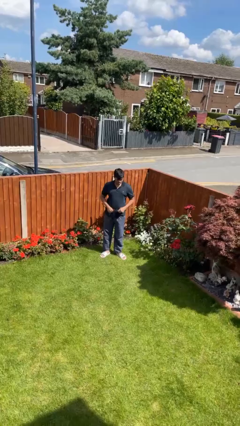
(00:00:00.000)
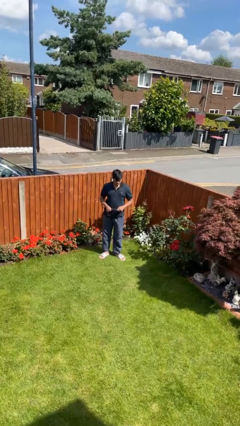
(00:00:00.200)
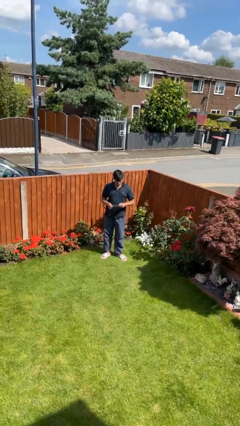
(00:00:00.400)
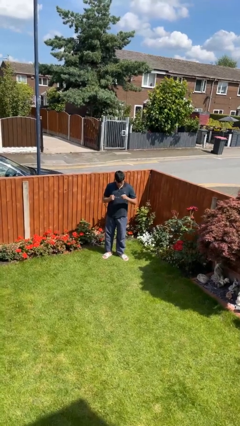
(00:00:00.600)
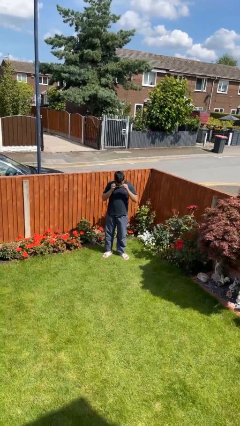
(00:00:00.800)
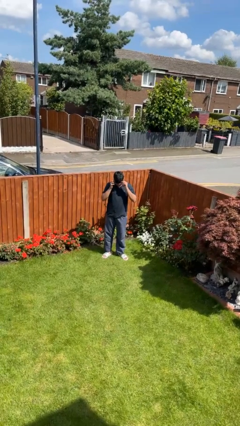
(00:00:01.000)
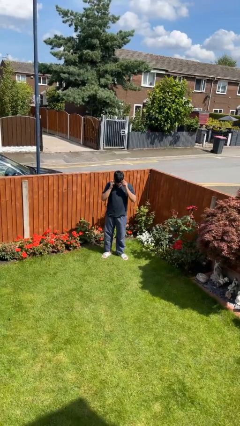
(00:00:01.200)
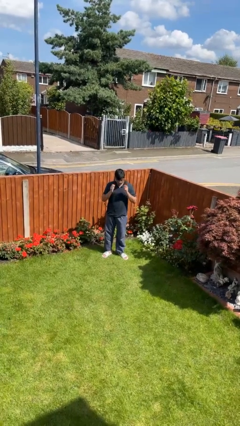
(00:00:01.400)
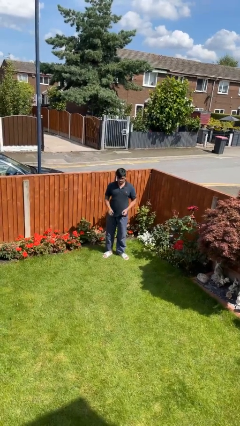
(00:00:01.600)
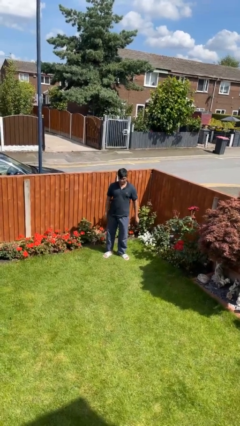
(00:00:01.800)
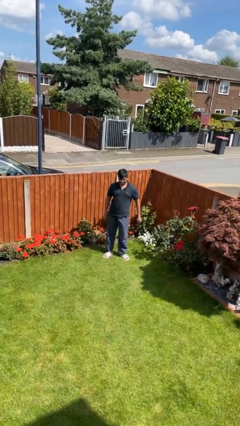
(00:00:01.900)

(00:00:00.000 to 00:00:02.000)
person puts on glasses

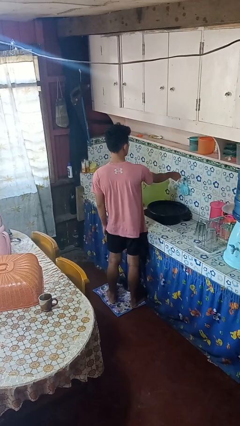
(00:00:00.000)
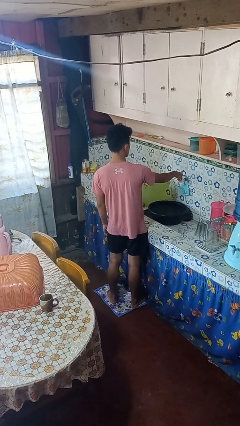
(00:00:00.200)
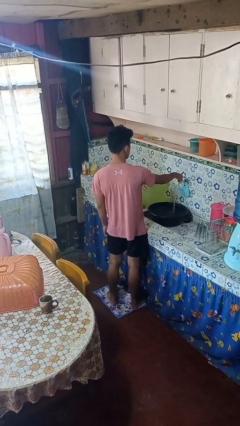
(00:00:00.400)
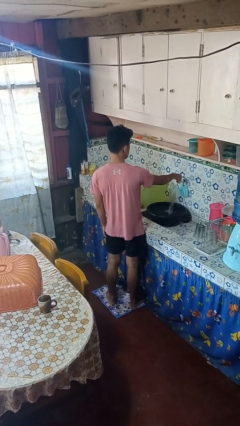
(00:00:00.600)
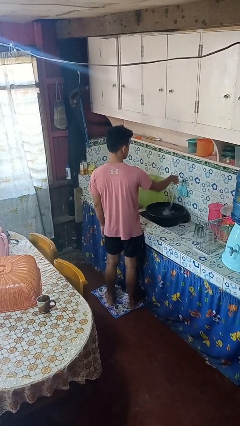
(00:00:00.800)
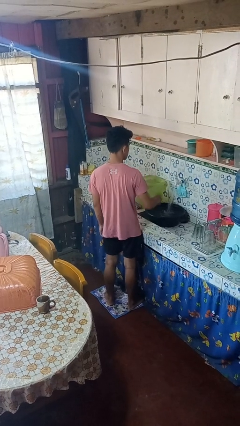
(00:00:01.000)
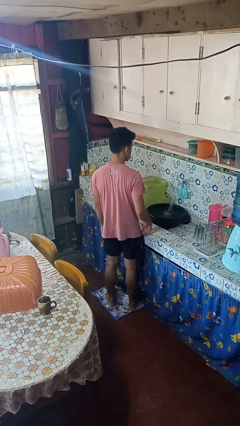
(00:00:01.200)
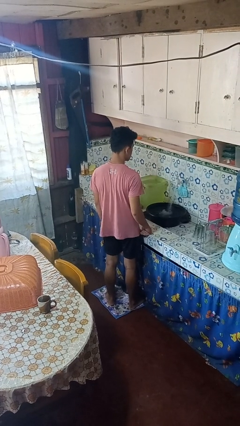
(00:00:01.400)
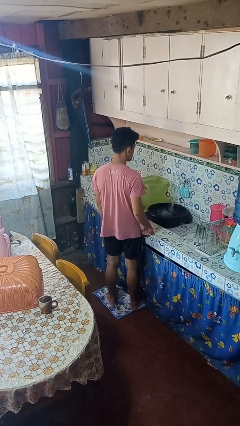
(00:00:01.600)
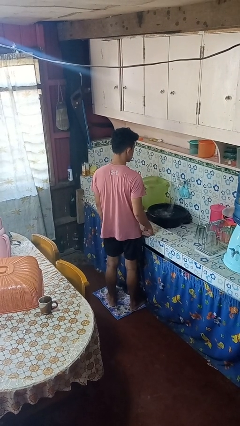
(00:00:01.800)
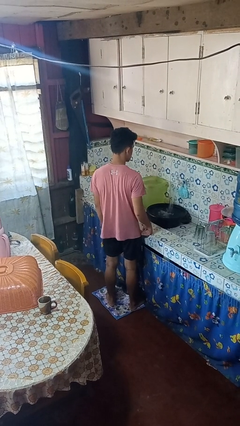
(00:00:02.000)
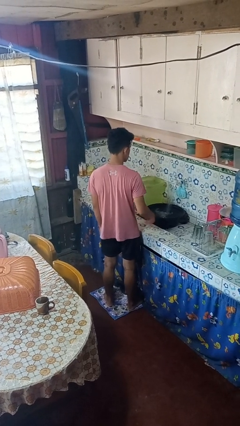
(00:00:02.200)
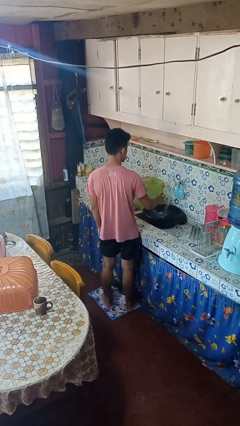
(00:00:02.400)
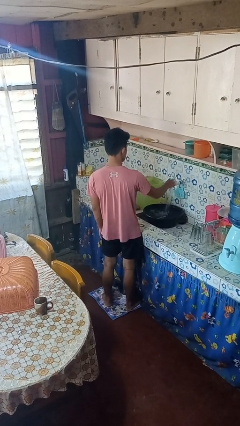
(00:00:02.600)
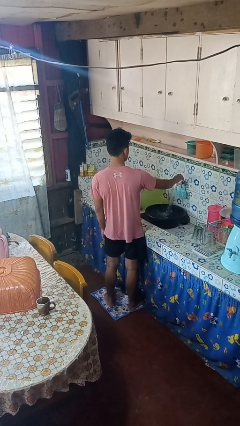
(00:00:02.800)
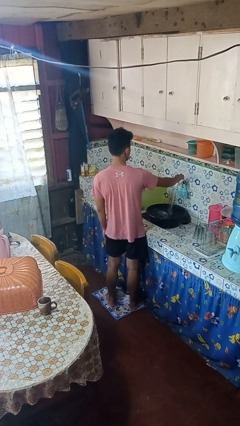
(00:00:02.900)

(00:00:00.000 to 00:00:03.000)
person turns on faucet

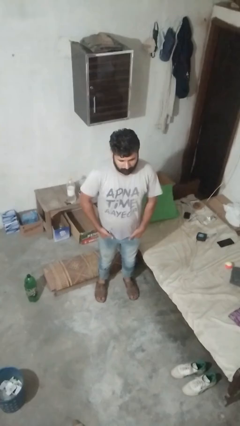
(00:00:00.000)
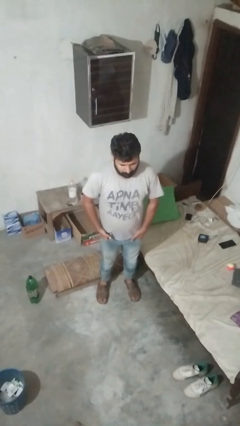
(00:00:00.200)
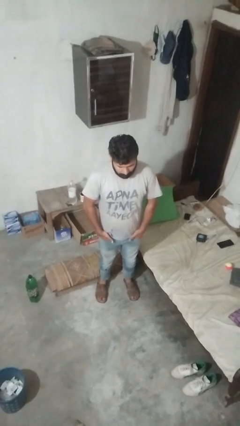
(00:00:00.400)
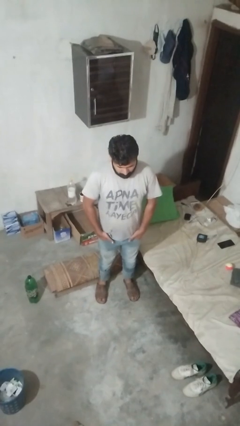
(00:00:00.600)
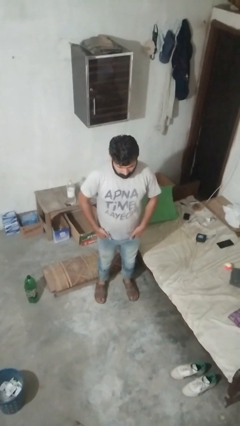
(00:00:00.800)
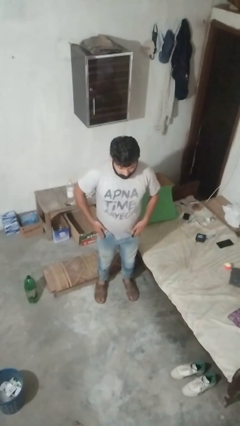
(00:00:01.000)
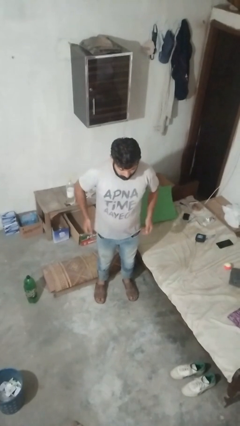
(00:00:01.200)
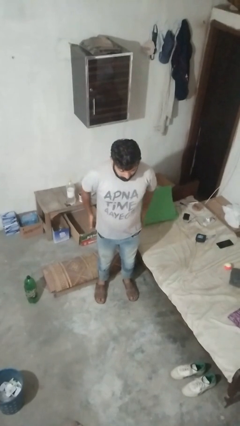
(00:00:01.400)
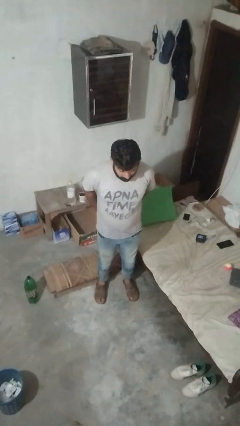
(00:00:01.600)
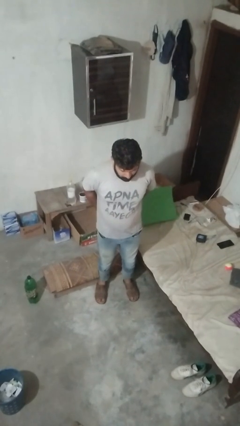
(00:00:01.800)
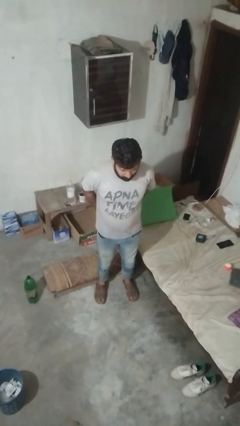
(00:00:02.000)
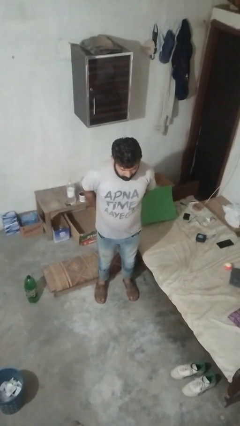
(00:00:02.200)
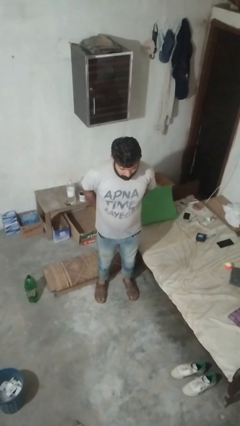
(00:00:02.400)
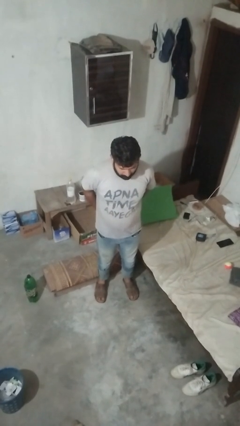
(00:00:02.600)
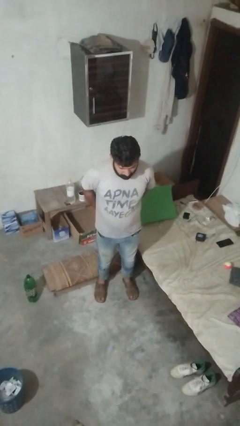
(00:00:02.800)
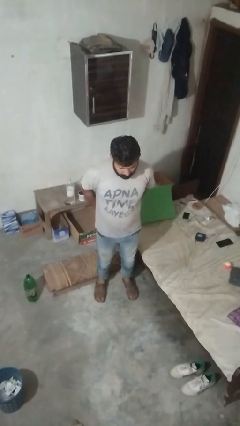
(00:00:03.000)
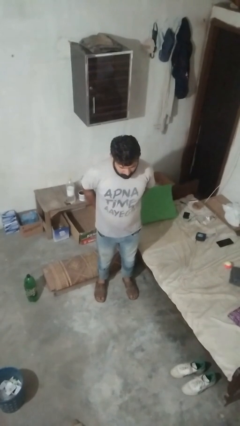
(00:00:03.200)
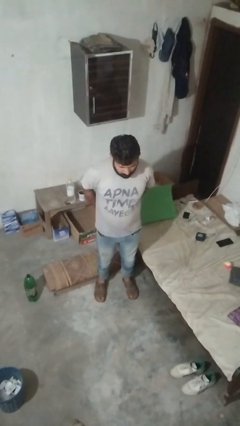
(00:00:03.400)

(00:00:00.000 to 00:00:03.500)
person puts hands in back pockets

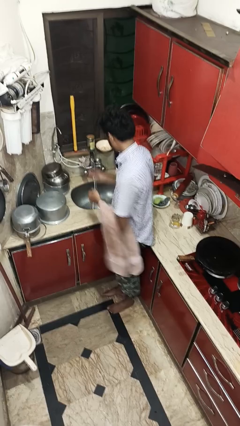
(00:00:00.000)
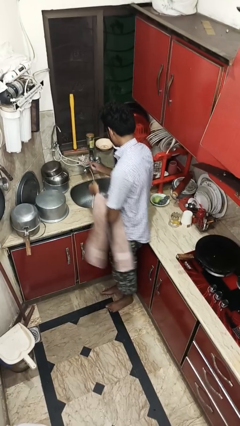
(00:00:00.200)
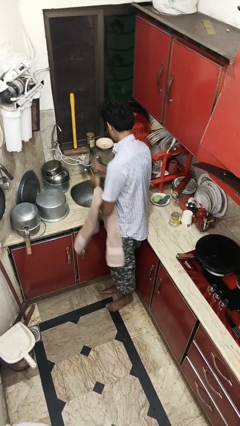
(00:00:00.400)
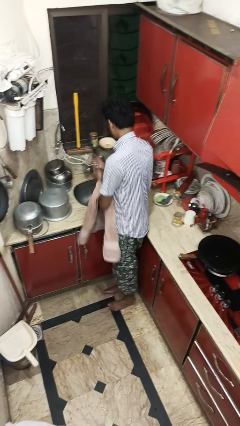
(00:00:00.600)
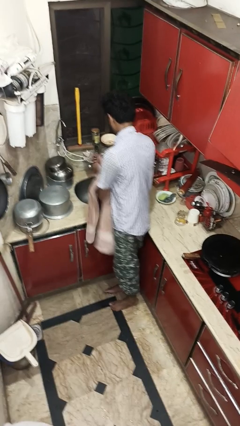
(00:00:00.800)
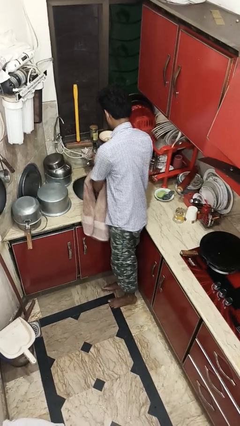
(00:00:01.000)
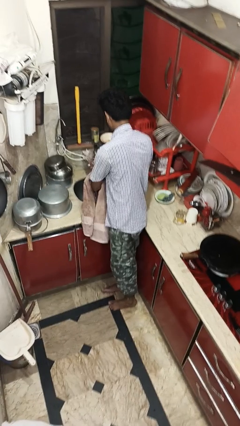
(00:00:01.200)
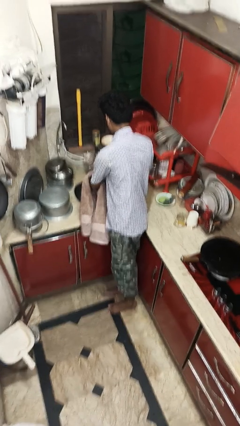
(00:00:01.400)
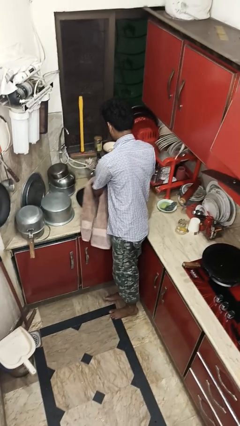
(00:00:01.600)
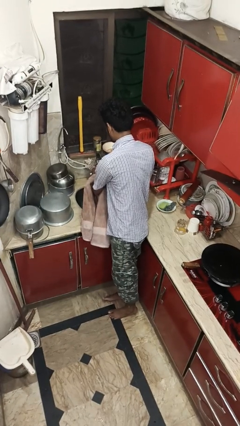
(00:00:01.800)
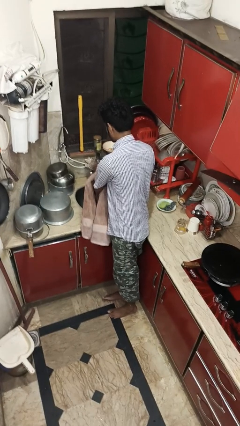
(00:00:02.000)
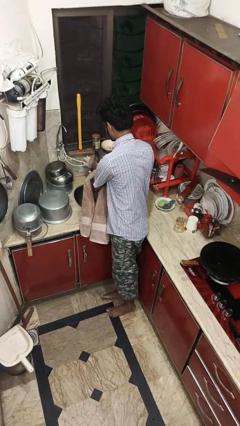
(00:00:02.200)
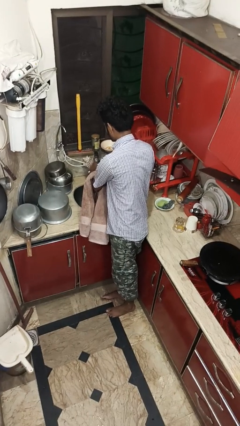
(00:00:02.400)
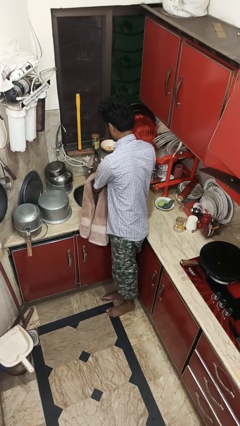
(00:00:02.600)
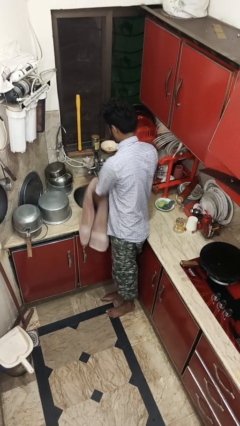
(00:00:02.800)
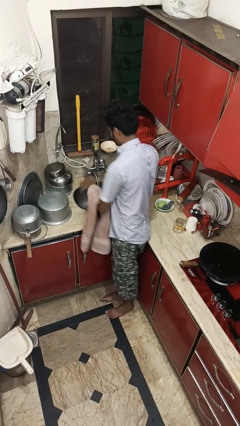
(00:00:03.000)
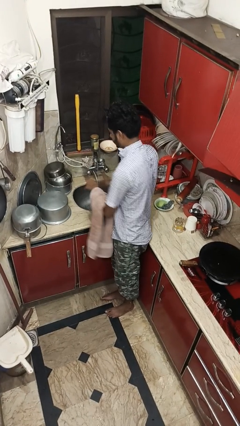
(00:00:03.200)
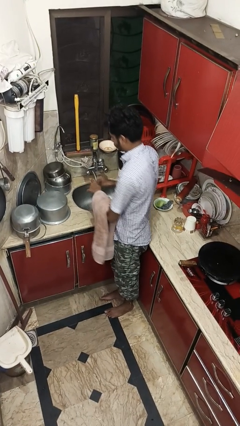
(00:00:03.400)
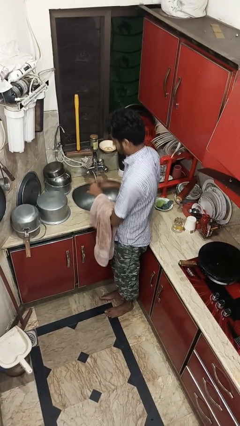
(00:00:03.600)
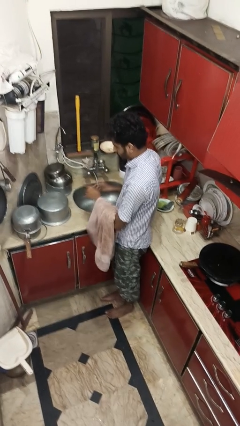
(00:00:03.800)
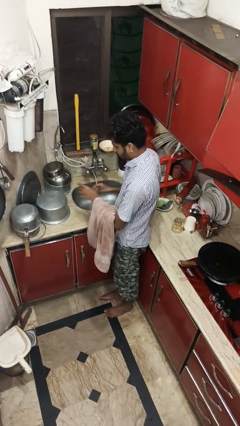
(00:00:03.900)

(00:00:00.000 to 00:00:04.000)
person washes hands

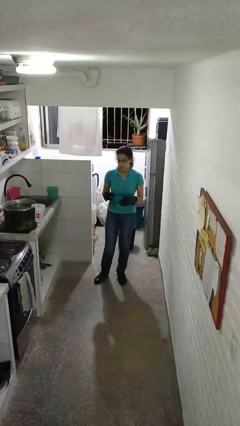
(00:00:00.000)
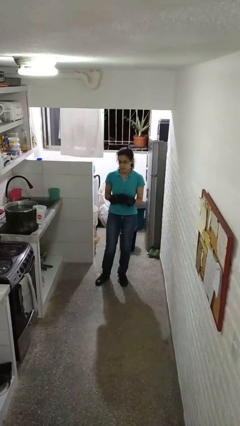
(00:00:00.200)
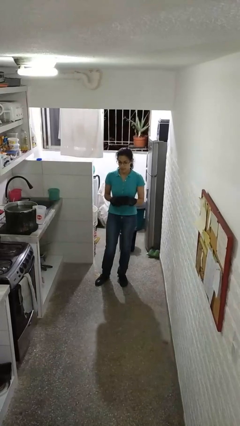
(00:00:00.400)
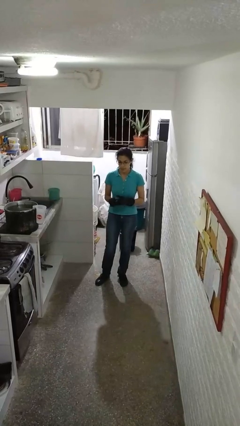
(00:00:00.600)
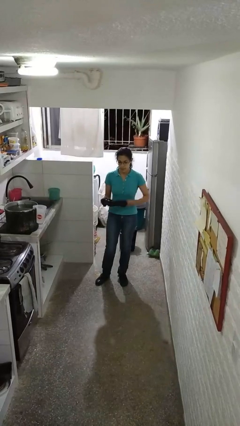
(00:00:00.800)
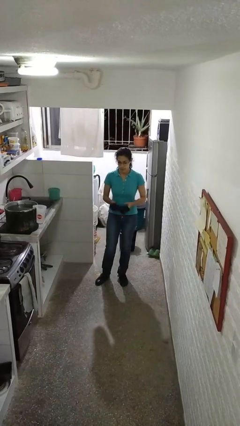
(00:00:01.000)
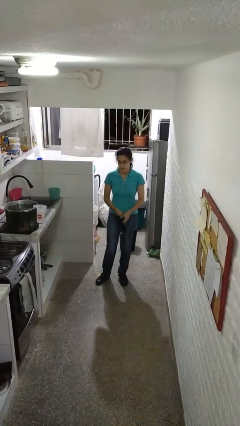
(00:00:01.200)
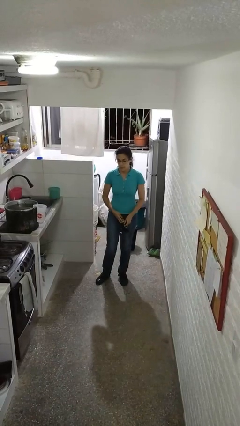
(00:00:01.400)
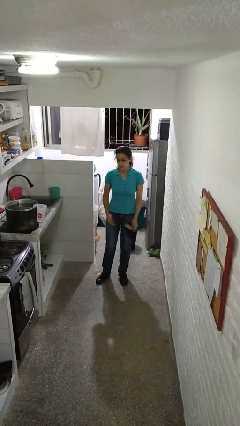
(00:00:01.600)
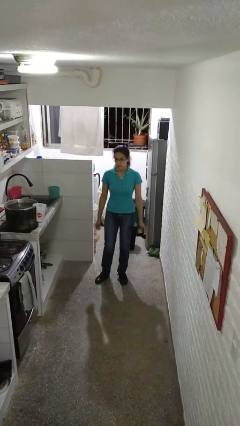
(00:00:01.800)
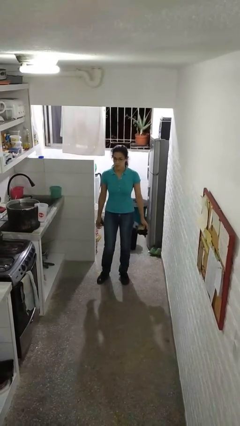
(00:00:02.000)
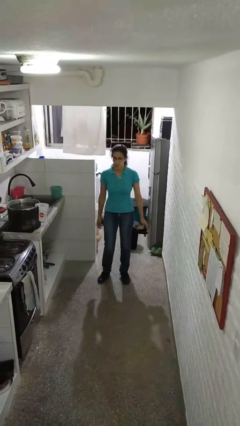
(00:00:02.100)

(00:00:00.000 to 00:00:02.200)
person takes off gloves

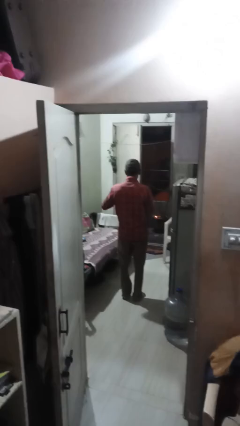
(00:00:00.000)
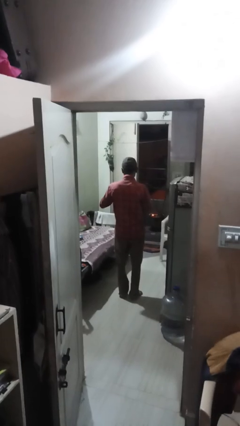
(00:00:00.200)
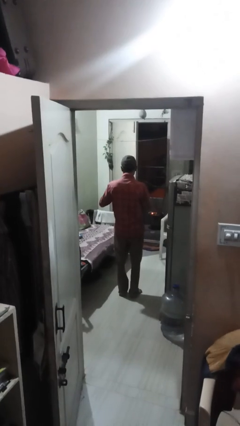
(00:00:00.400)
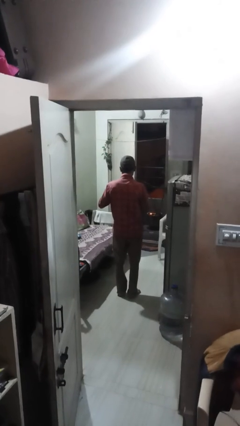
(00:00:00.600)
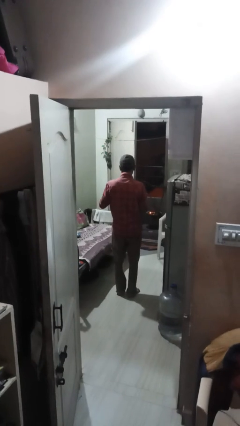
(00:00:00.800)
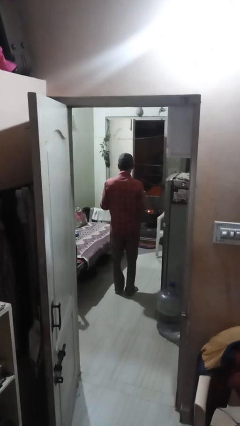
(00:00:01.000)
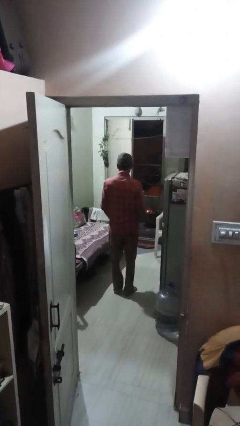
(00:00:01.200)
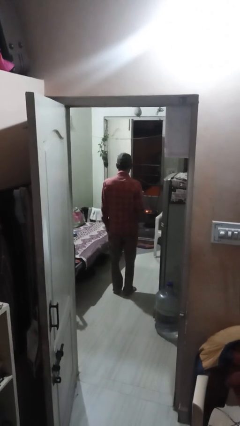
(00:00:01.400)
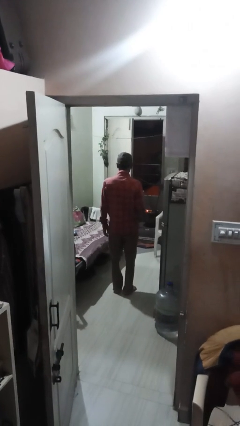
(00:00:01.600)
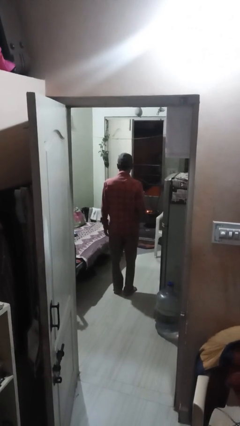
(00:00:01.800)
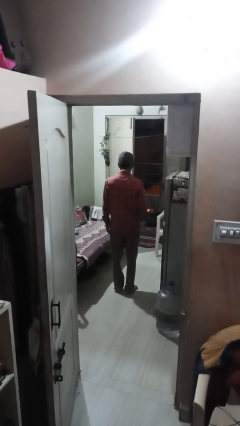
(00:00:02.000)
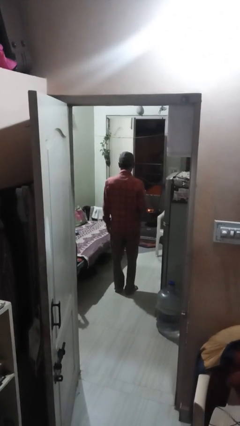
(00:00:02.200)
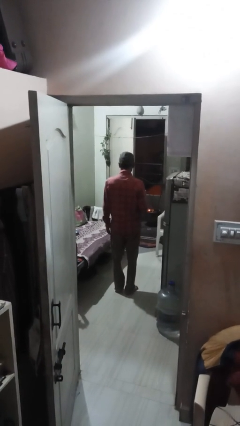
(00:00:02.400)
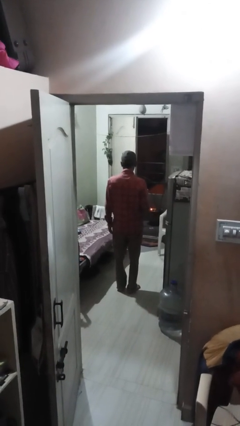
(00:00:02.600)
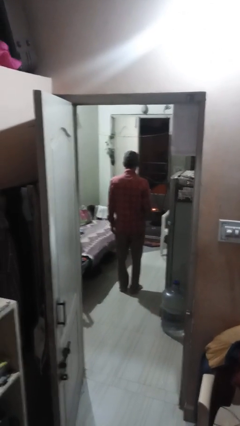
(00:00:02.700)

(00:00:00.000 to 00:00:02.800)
person puts phone into pocket
